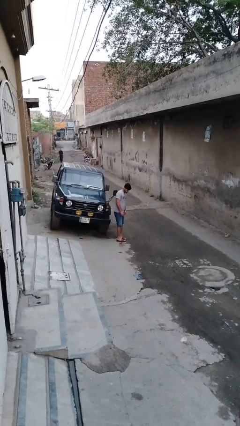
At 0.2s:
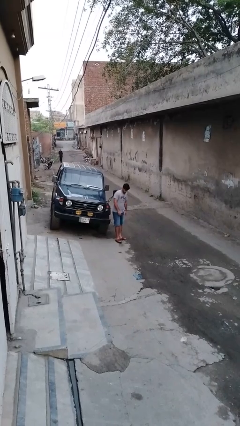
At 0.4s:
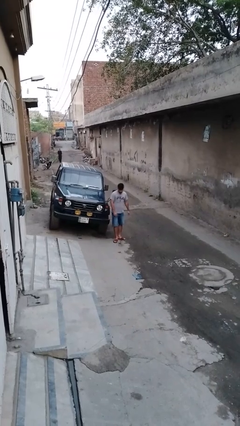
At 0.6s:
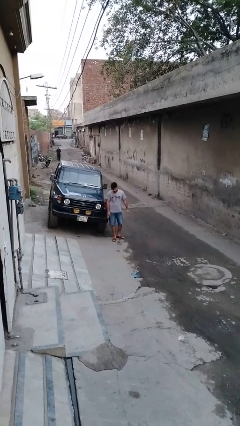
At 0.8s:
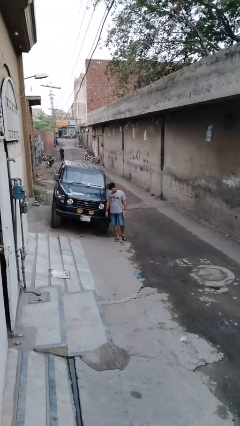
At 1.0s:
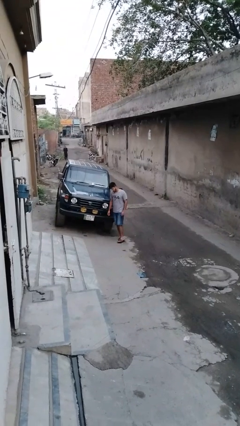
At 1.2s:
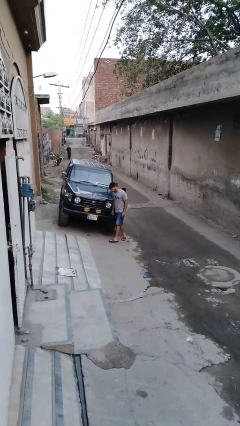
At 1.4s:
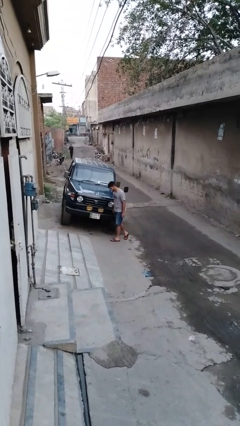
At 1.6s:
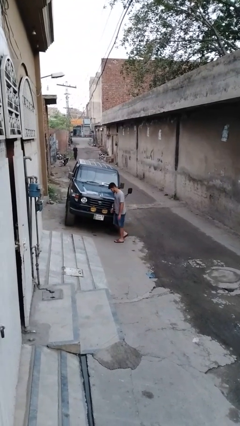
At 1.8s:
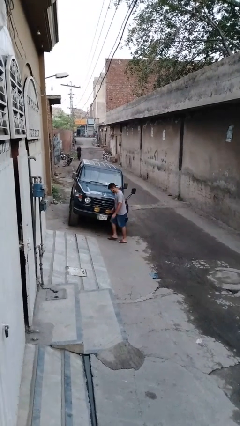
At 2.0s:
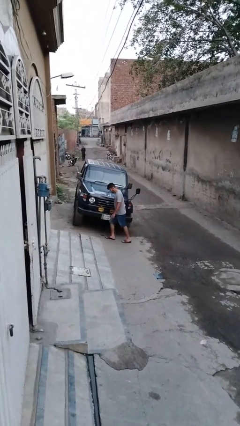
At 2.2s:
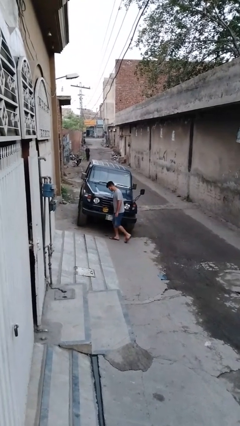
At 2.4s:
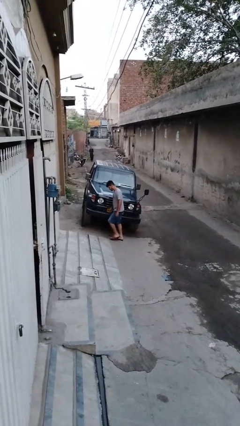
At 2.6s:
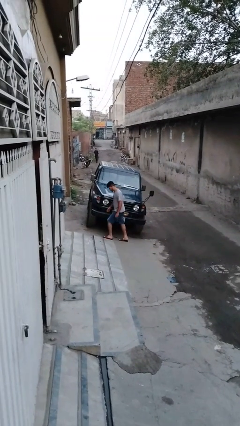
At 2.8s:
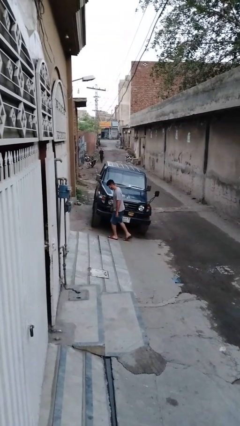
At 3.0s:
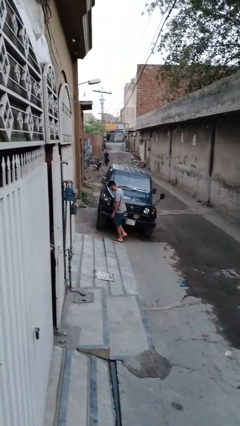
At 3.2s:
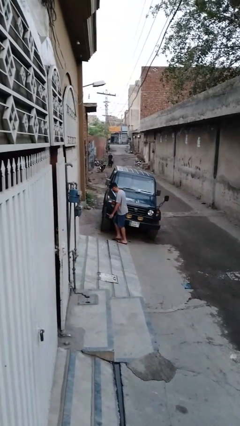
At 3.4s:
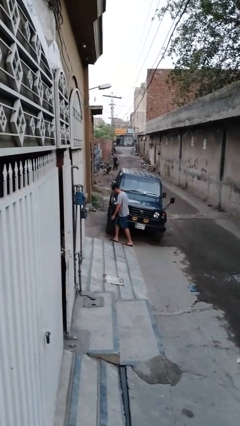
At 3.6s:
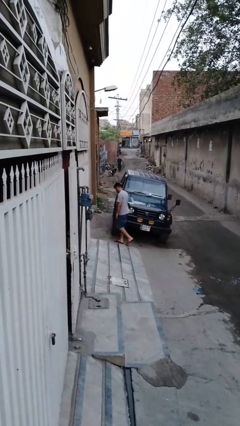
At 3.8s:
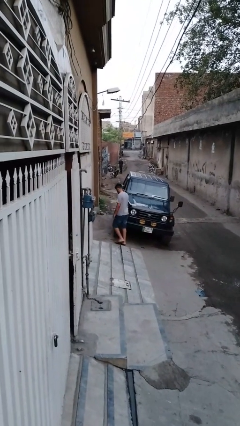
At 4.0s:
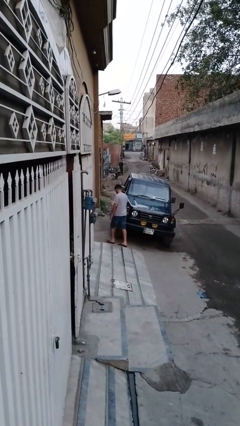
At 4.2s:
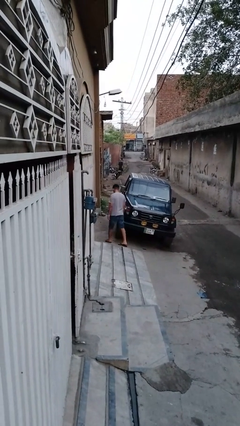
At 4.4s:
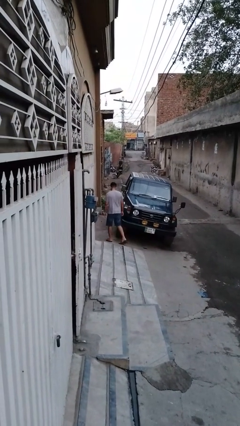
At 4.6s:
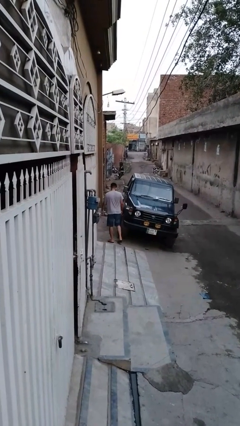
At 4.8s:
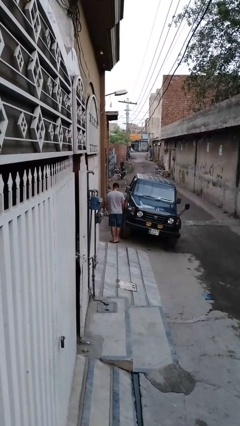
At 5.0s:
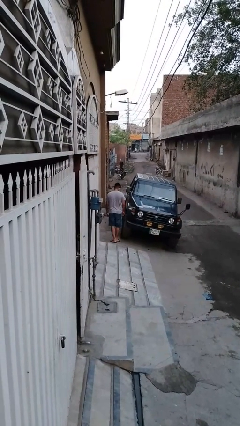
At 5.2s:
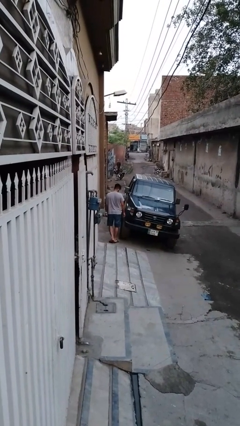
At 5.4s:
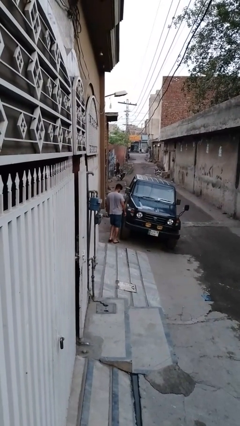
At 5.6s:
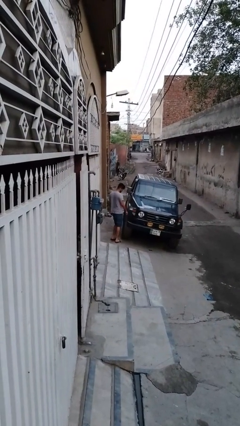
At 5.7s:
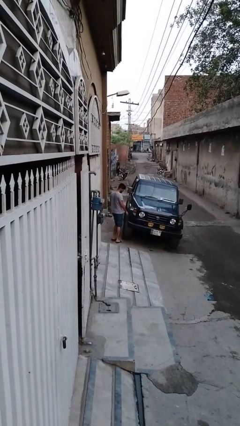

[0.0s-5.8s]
person walks around car

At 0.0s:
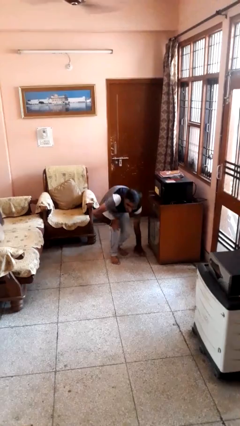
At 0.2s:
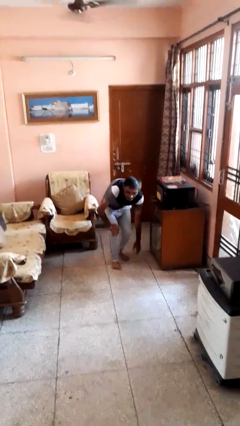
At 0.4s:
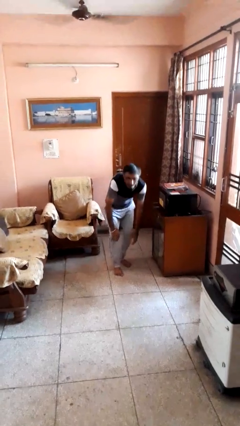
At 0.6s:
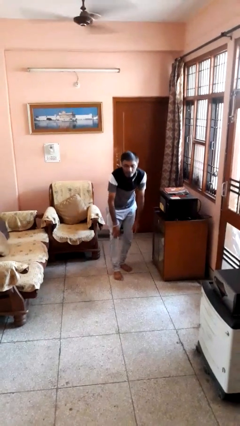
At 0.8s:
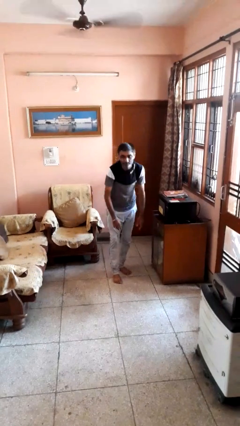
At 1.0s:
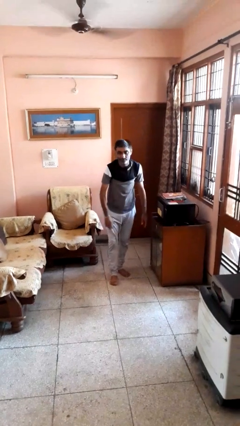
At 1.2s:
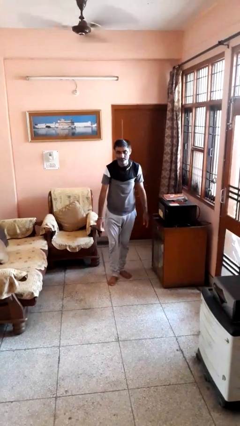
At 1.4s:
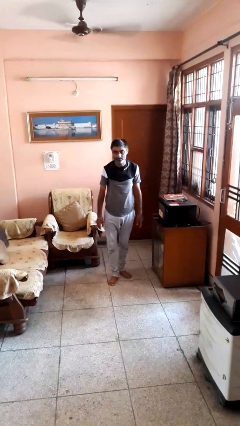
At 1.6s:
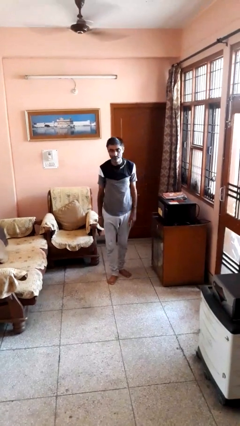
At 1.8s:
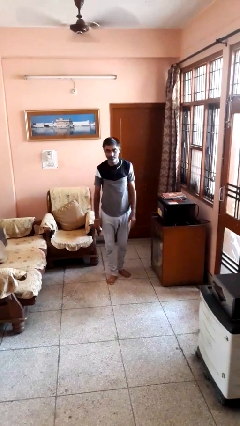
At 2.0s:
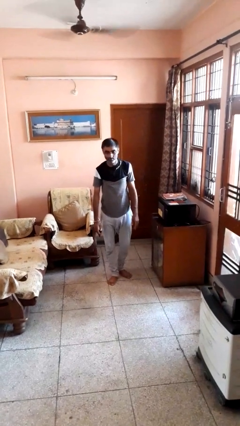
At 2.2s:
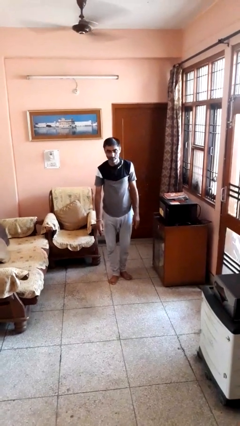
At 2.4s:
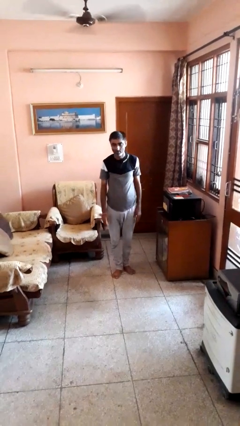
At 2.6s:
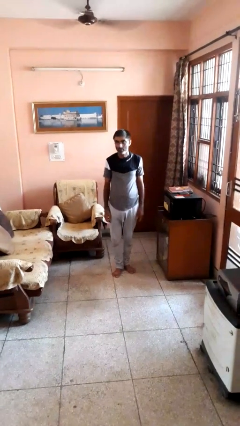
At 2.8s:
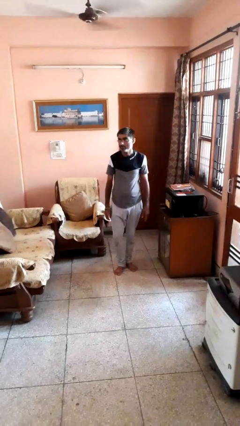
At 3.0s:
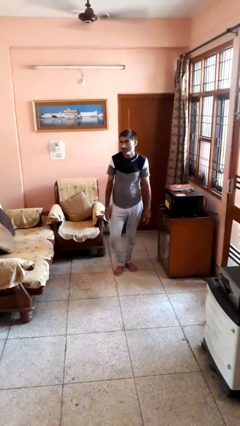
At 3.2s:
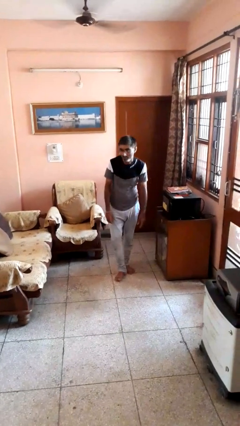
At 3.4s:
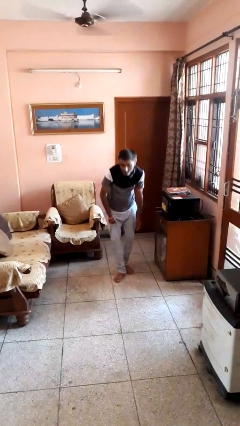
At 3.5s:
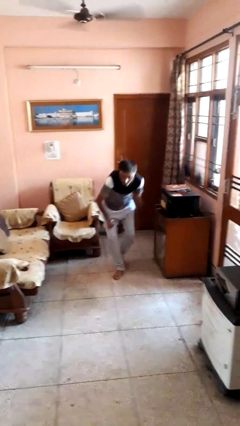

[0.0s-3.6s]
person stands up from floor

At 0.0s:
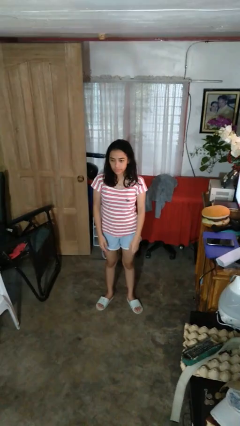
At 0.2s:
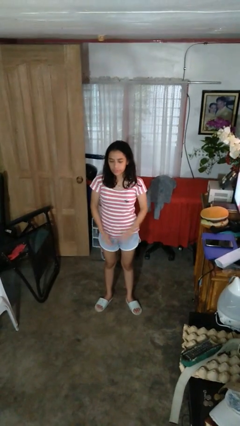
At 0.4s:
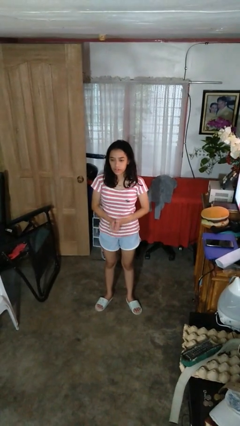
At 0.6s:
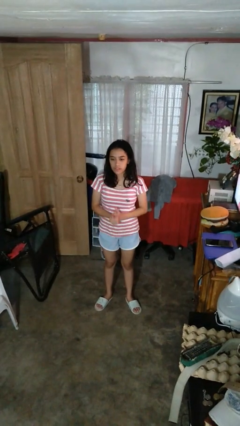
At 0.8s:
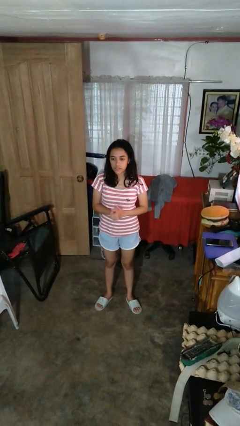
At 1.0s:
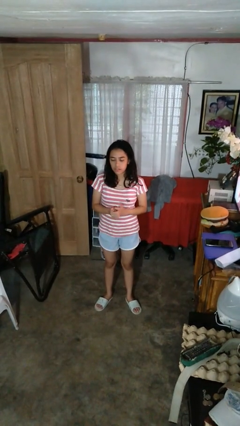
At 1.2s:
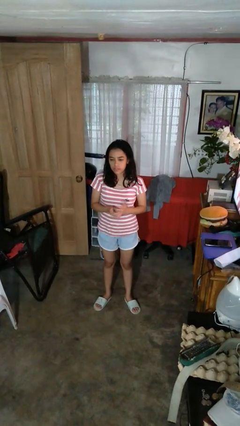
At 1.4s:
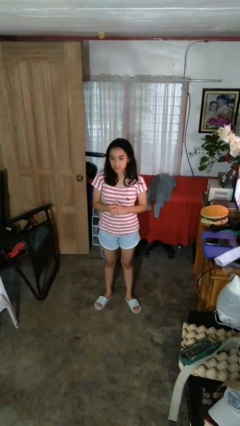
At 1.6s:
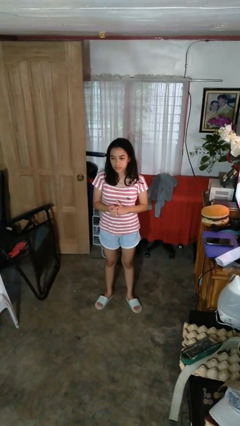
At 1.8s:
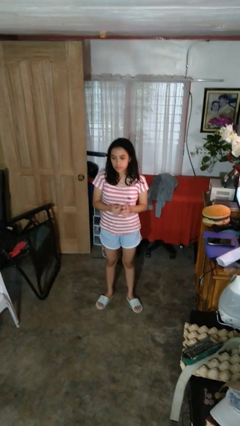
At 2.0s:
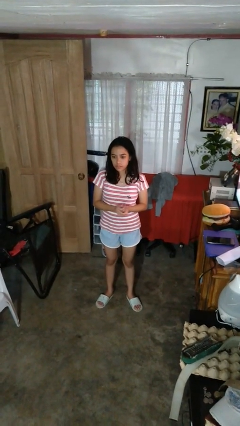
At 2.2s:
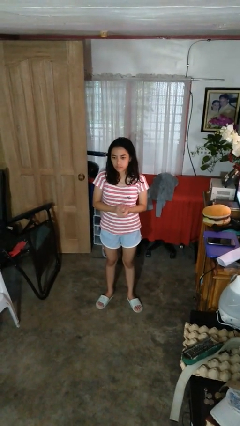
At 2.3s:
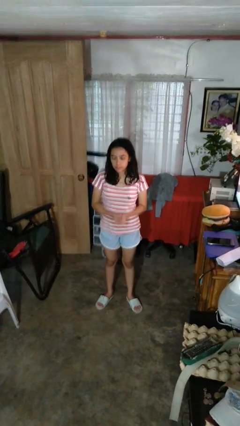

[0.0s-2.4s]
person cracks knuckles

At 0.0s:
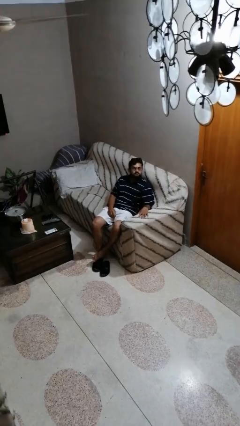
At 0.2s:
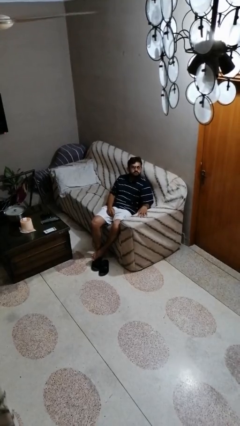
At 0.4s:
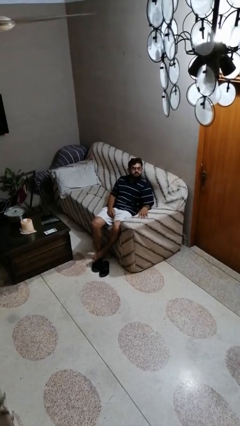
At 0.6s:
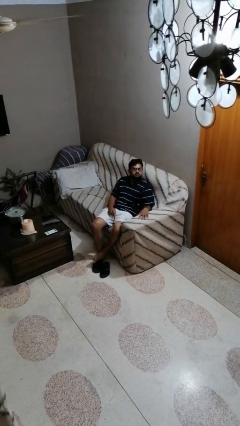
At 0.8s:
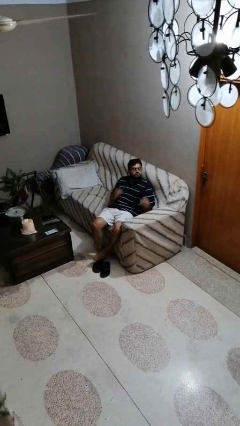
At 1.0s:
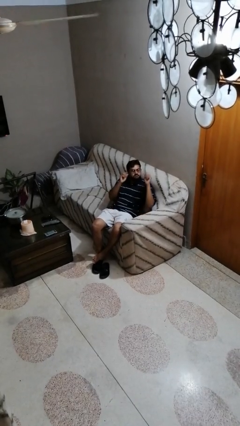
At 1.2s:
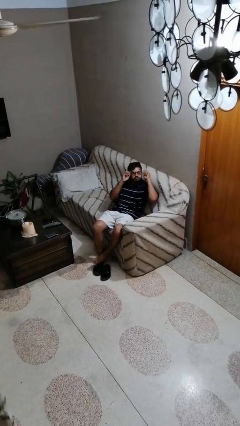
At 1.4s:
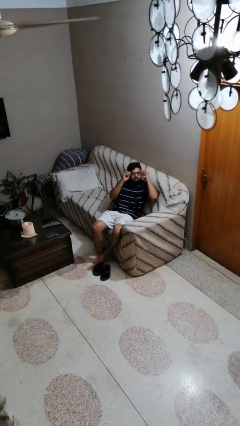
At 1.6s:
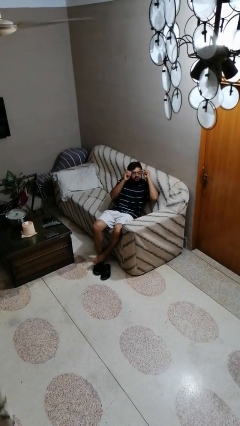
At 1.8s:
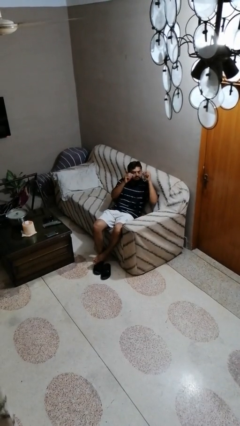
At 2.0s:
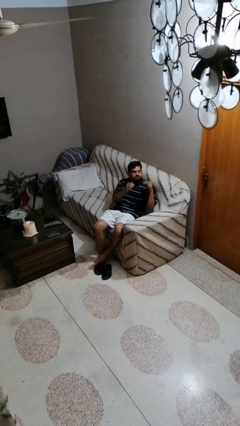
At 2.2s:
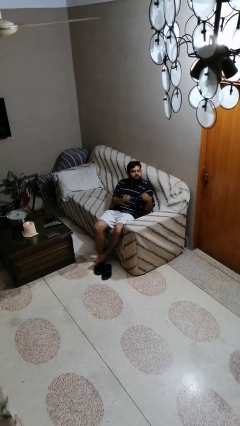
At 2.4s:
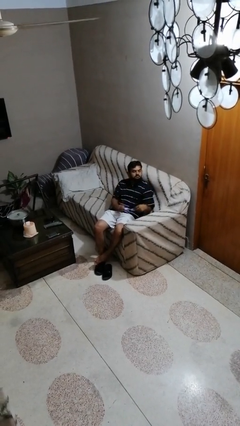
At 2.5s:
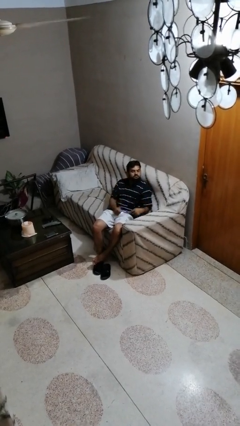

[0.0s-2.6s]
person takes off glasses

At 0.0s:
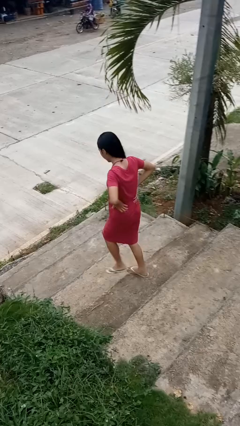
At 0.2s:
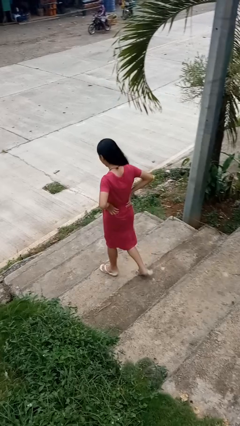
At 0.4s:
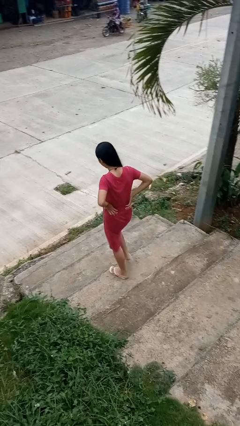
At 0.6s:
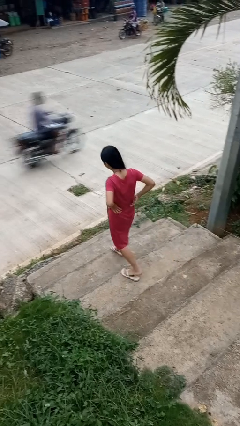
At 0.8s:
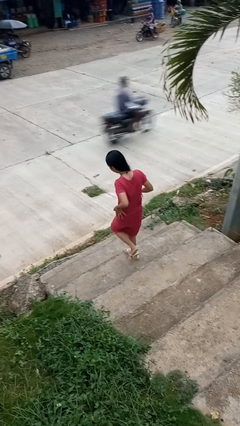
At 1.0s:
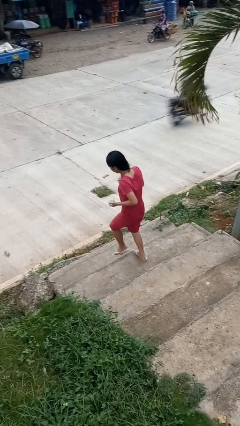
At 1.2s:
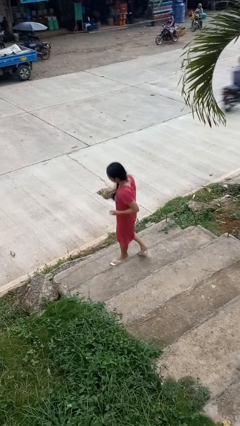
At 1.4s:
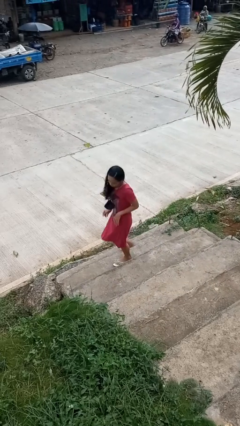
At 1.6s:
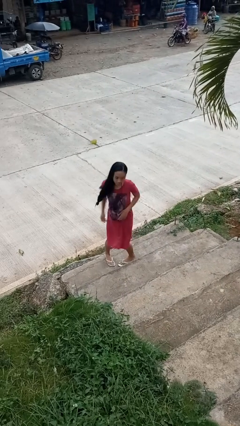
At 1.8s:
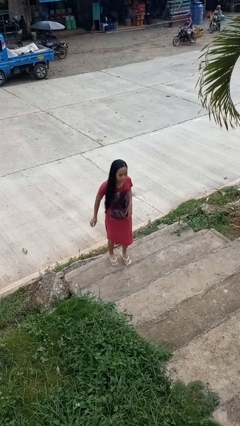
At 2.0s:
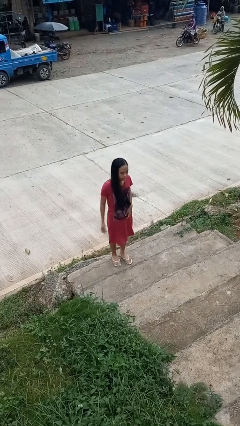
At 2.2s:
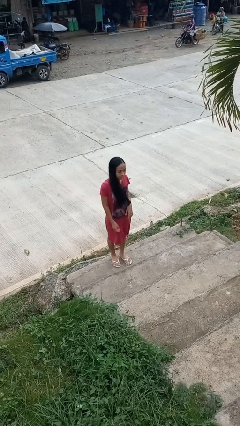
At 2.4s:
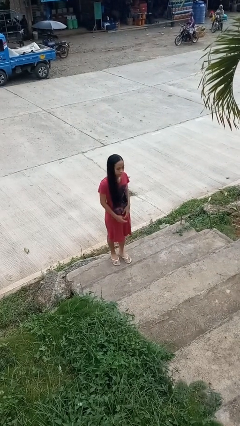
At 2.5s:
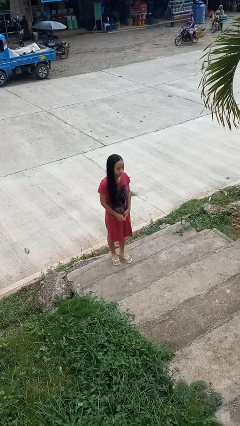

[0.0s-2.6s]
person climbs down stairs

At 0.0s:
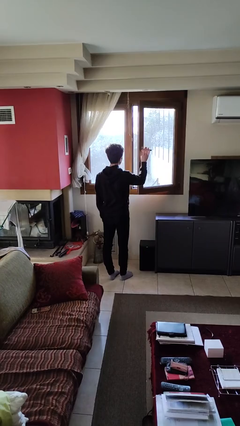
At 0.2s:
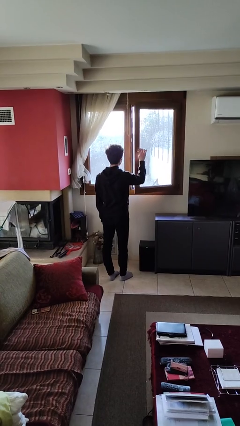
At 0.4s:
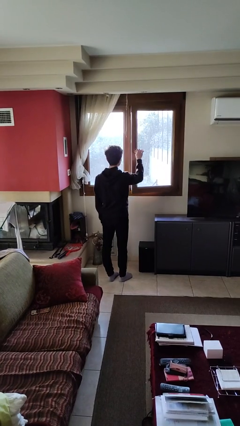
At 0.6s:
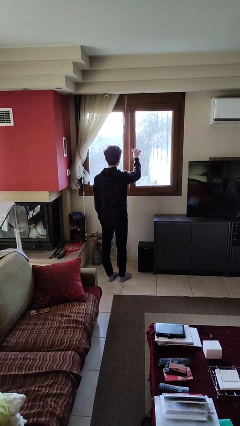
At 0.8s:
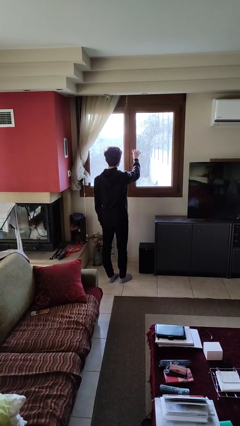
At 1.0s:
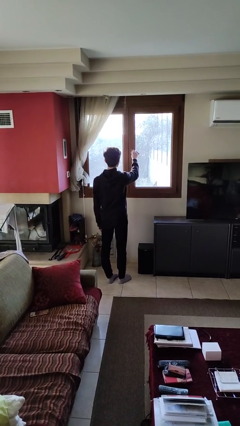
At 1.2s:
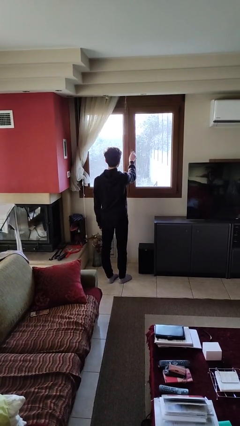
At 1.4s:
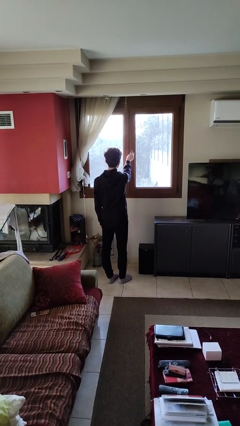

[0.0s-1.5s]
person closes home window
